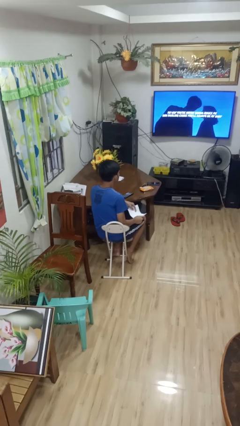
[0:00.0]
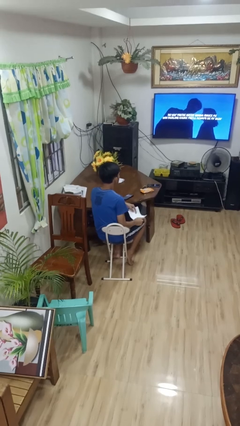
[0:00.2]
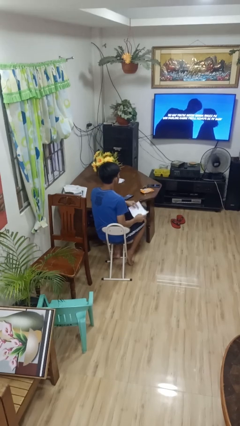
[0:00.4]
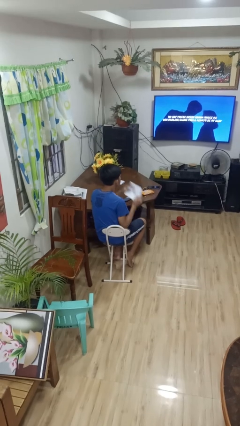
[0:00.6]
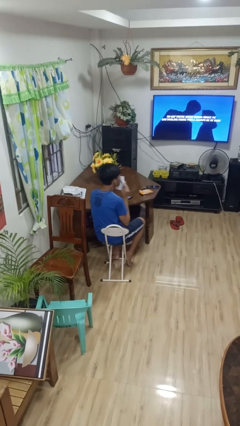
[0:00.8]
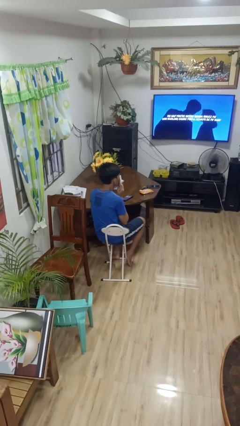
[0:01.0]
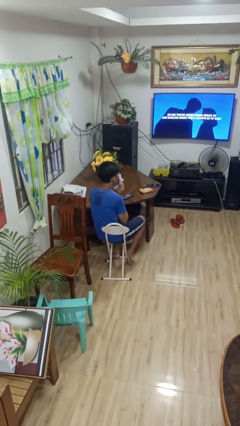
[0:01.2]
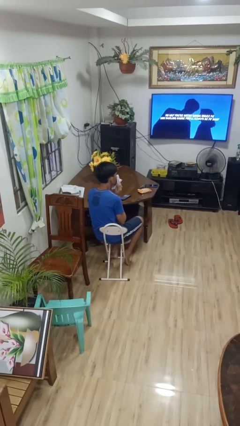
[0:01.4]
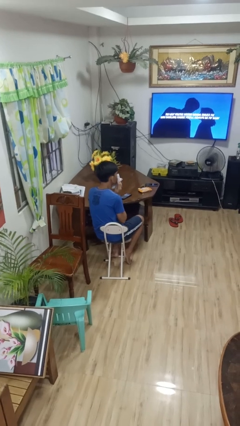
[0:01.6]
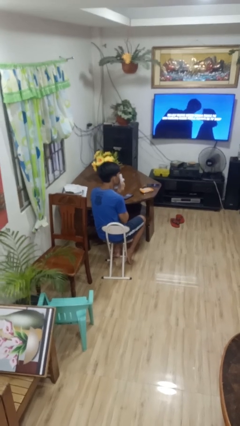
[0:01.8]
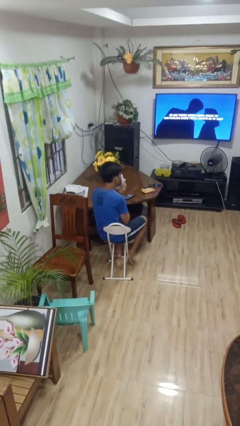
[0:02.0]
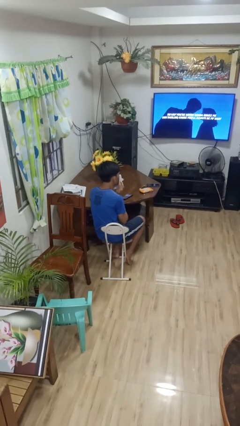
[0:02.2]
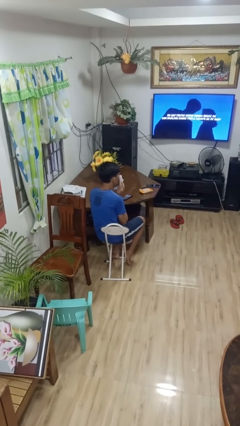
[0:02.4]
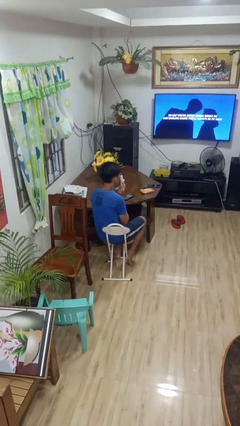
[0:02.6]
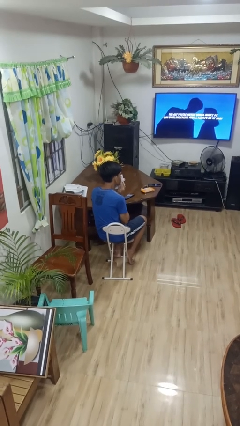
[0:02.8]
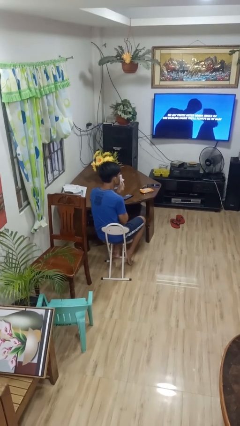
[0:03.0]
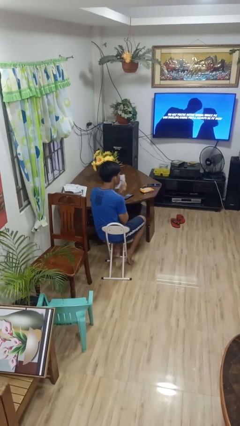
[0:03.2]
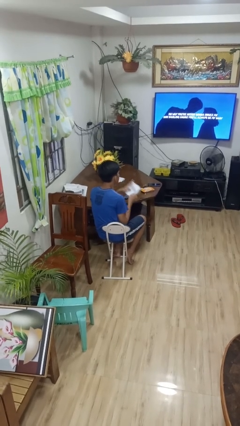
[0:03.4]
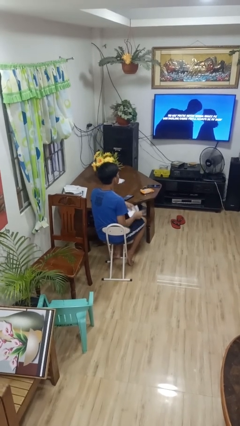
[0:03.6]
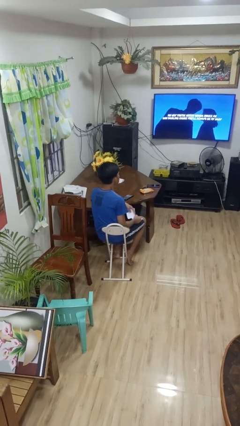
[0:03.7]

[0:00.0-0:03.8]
person wipes mouth with napkin

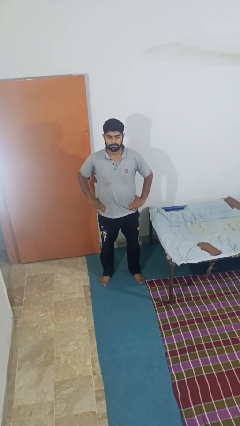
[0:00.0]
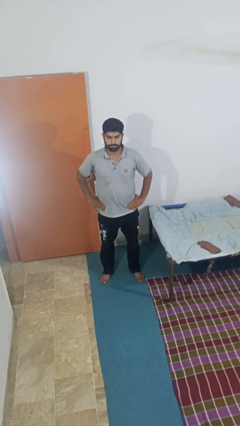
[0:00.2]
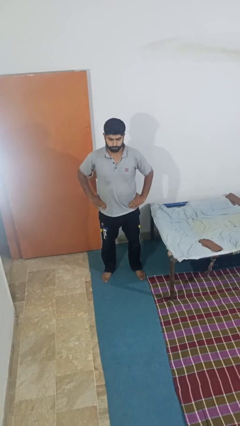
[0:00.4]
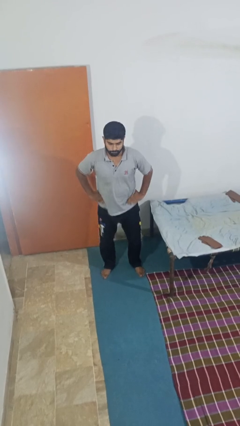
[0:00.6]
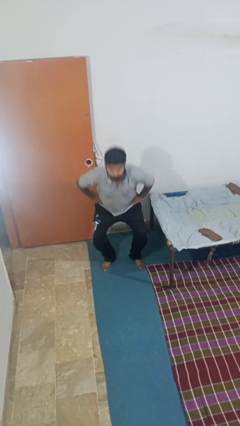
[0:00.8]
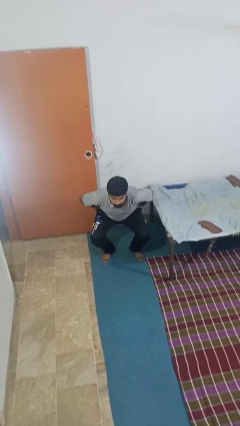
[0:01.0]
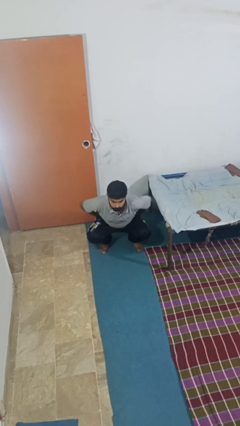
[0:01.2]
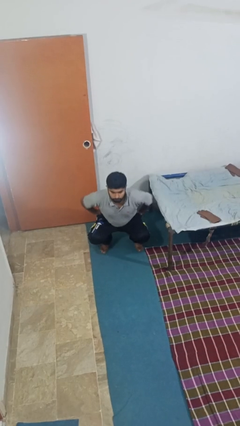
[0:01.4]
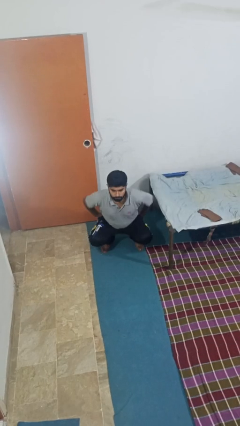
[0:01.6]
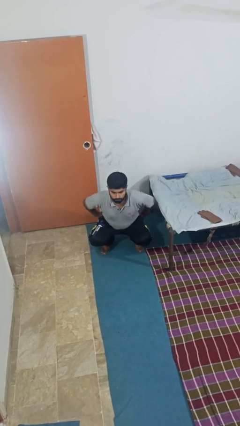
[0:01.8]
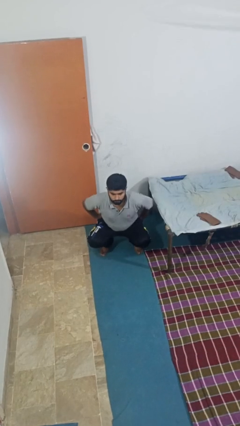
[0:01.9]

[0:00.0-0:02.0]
person squats

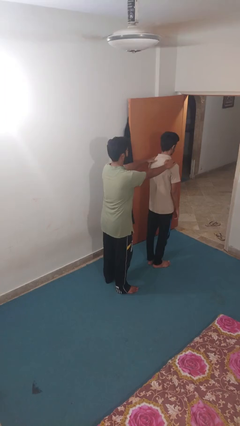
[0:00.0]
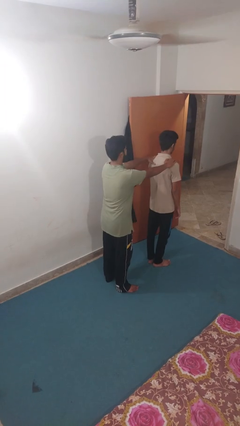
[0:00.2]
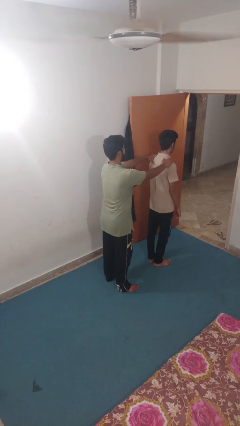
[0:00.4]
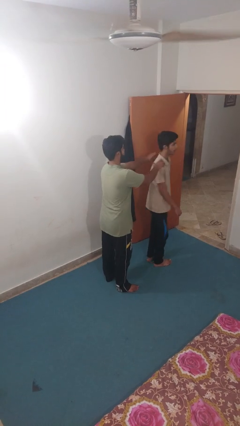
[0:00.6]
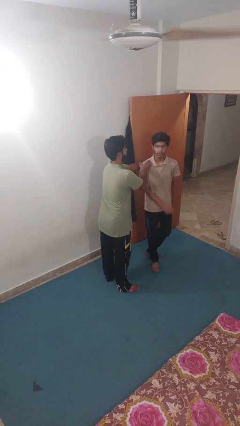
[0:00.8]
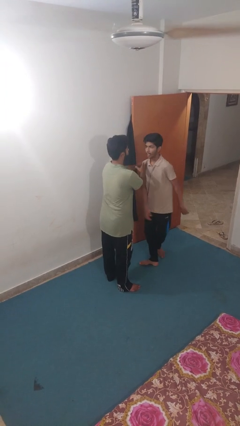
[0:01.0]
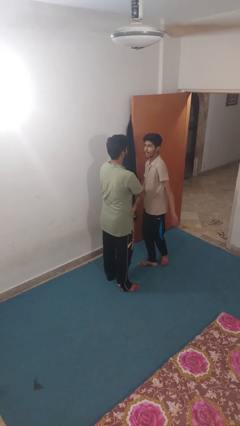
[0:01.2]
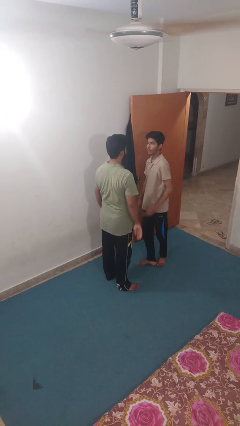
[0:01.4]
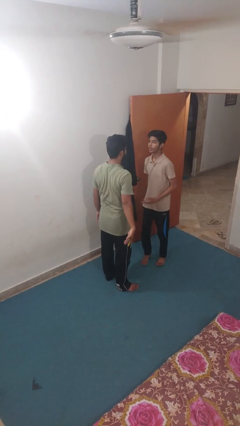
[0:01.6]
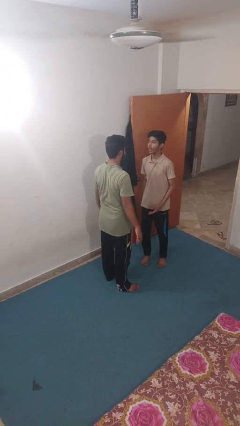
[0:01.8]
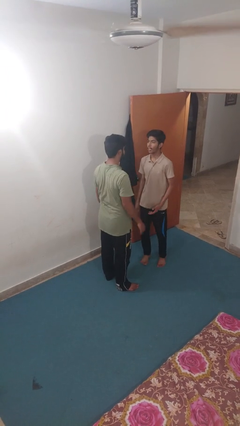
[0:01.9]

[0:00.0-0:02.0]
person spins person around

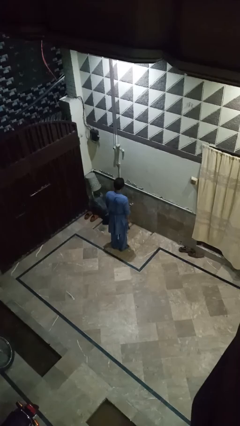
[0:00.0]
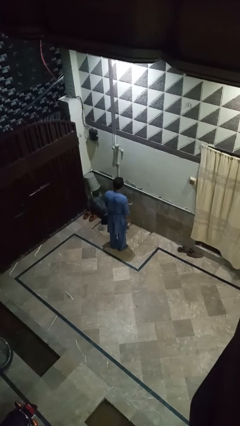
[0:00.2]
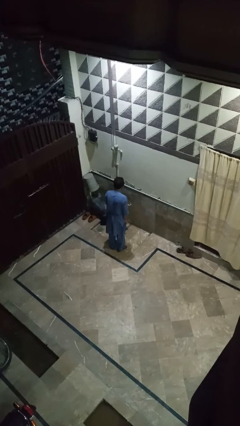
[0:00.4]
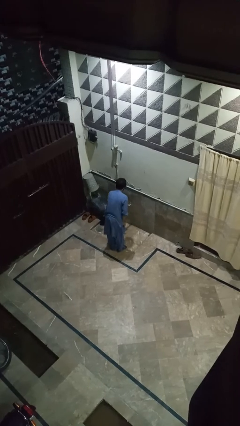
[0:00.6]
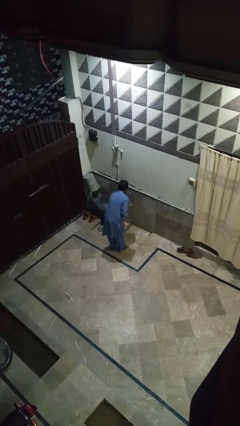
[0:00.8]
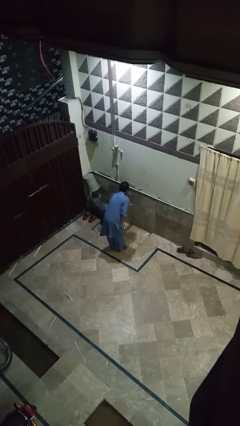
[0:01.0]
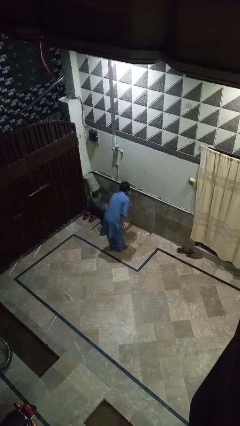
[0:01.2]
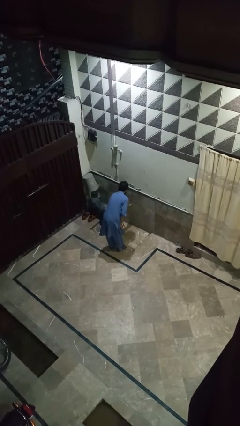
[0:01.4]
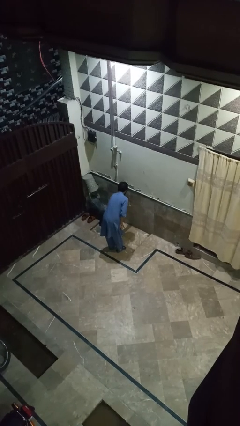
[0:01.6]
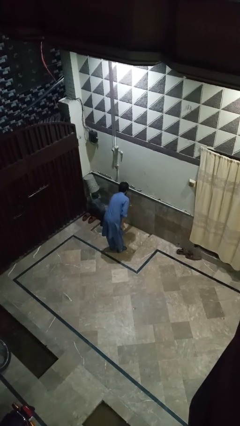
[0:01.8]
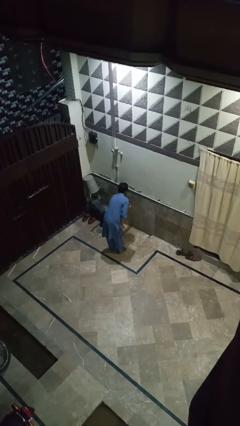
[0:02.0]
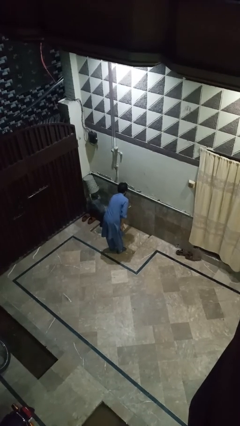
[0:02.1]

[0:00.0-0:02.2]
person turns on faucet

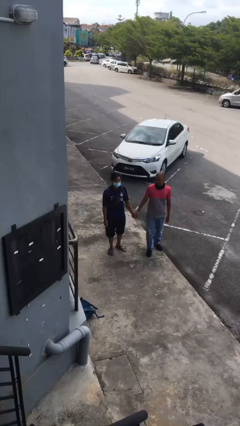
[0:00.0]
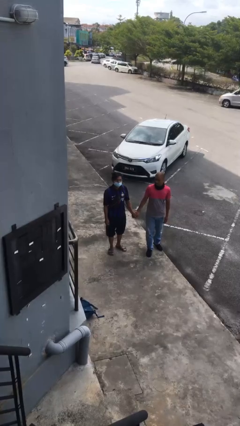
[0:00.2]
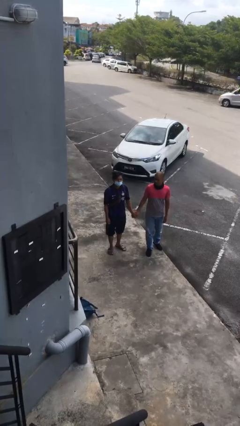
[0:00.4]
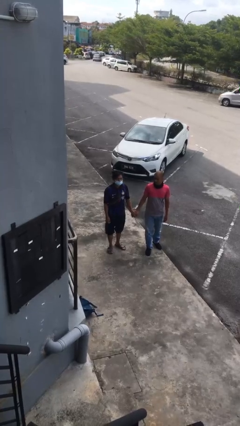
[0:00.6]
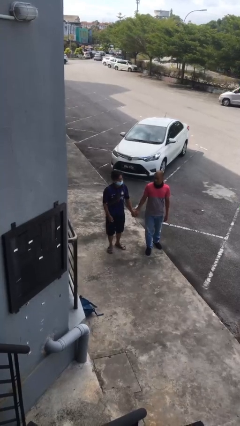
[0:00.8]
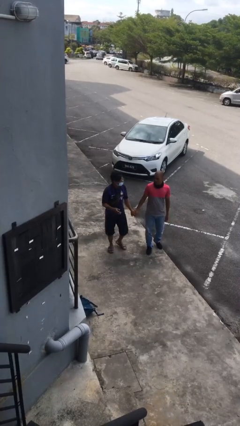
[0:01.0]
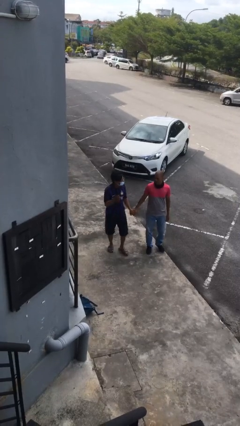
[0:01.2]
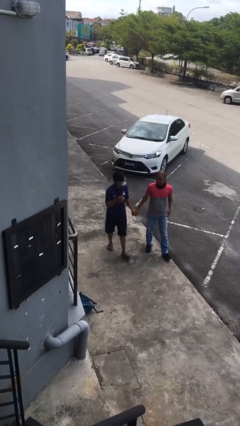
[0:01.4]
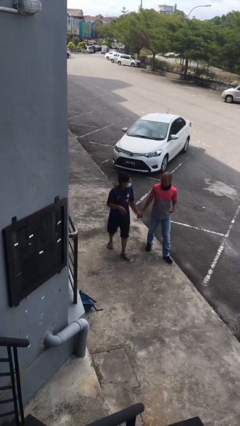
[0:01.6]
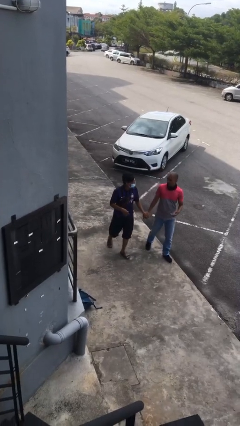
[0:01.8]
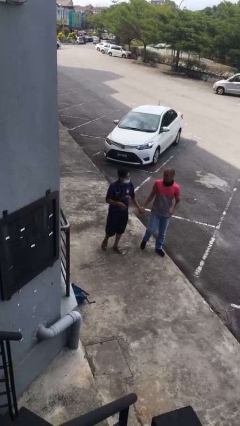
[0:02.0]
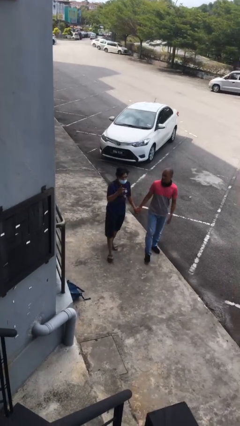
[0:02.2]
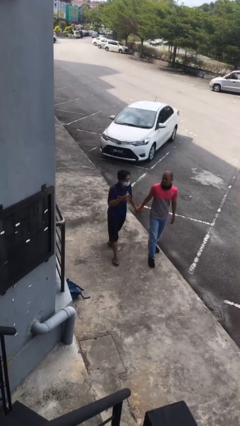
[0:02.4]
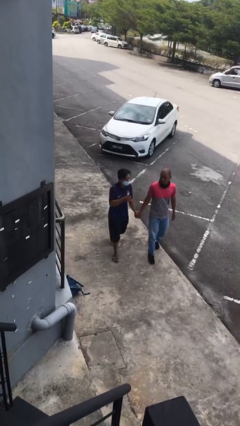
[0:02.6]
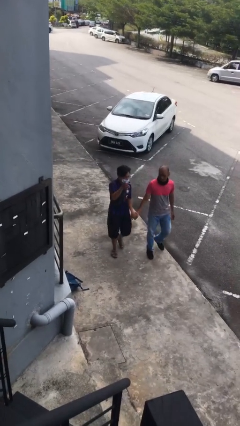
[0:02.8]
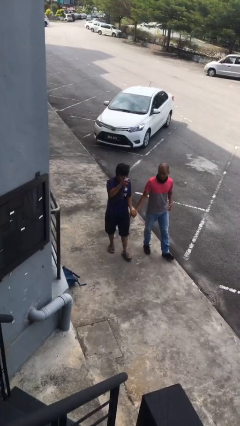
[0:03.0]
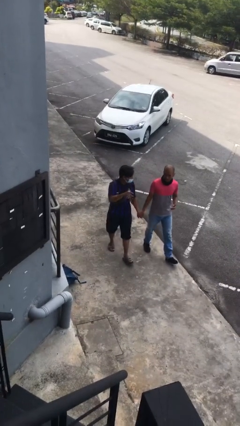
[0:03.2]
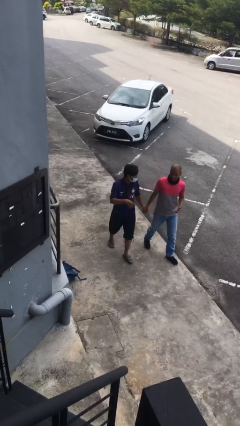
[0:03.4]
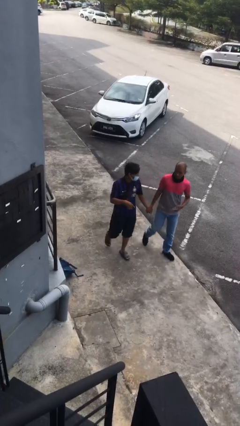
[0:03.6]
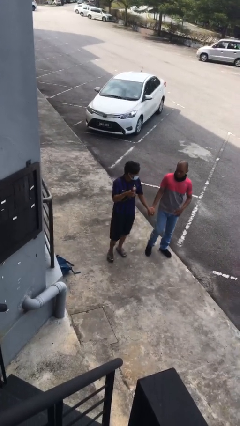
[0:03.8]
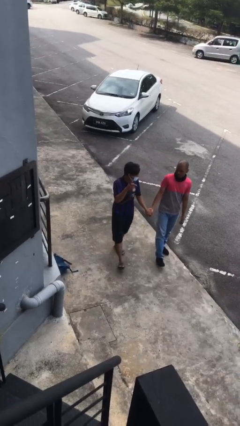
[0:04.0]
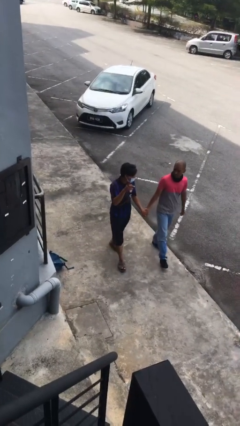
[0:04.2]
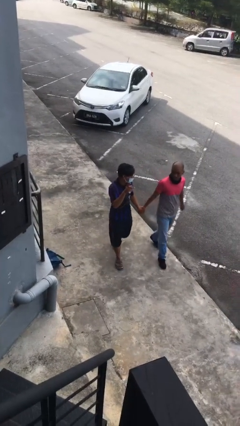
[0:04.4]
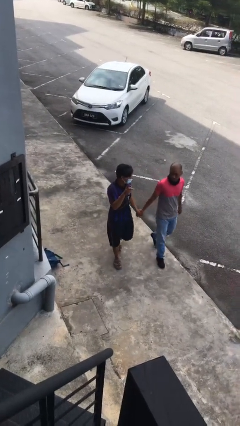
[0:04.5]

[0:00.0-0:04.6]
person holds hand

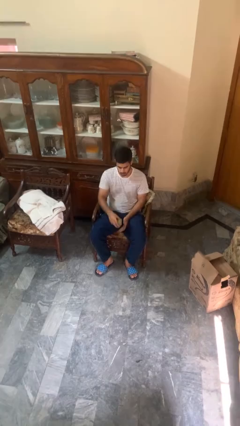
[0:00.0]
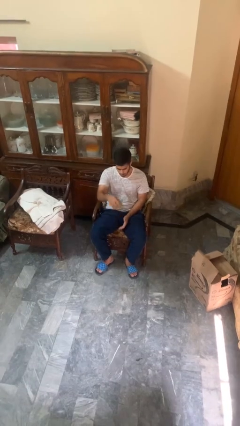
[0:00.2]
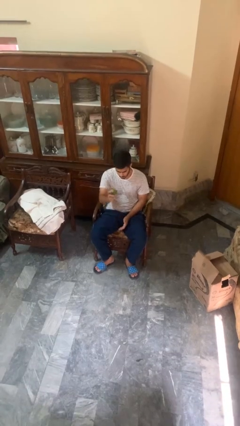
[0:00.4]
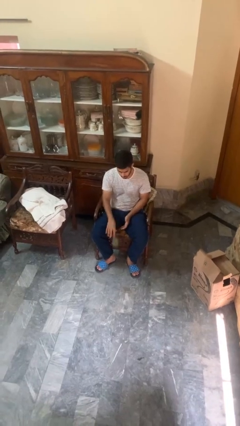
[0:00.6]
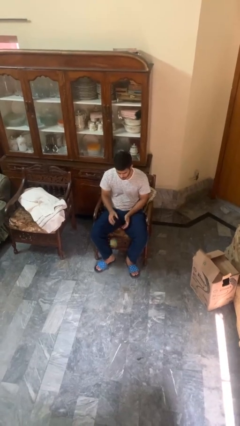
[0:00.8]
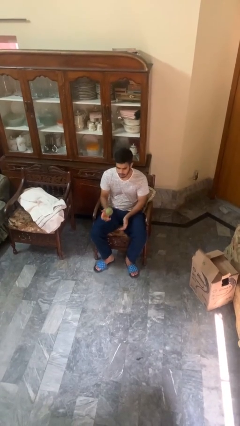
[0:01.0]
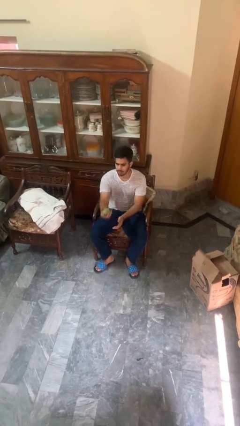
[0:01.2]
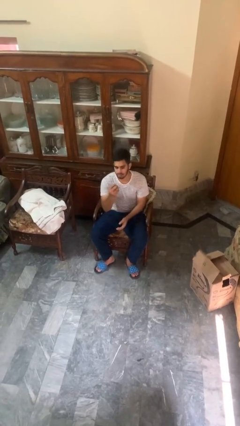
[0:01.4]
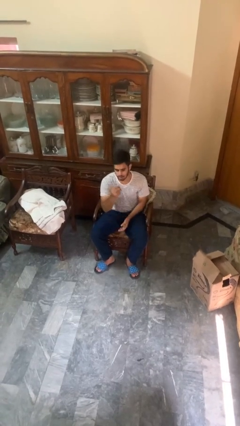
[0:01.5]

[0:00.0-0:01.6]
person bounces ball on floor

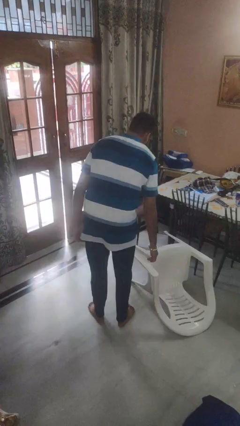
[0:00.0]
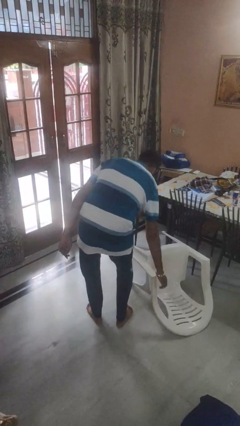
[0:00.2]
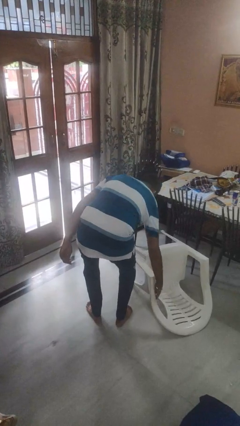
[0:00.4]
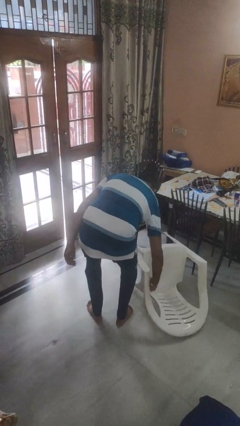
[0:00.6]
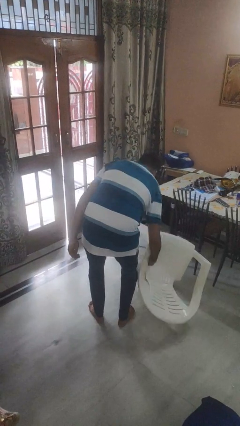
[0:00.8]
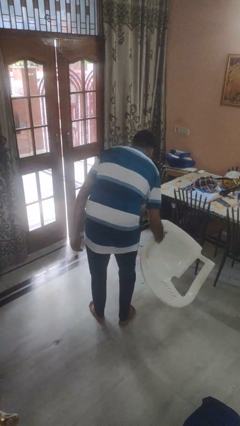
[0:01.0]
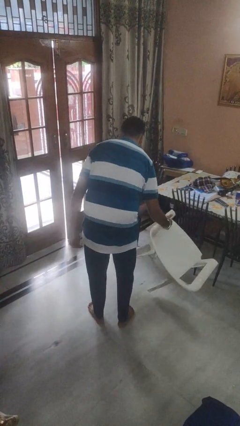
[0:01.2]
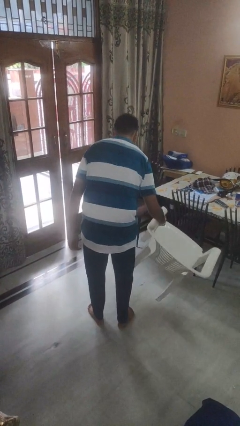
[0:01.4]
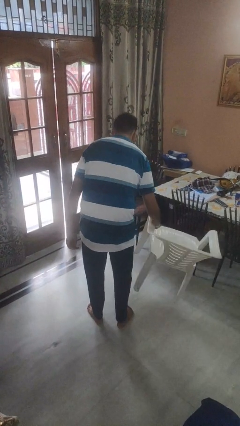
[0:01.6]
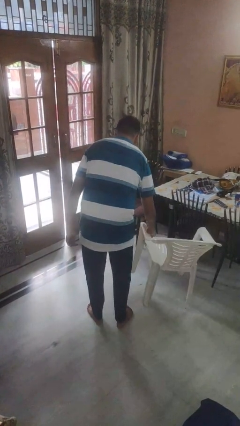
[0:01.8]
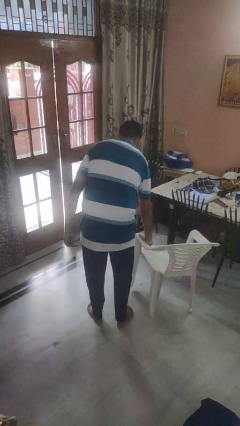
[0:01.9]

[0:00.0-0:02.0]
person sets upright furniture
